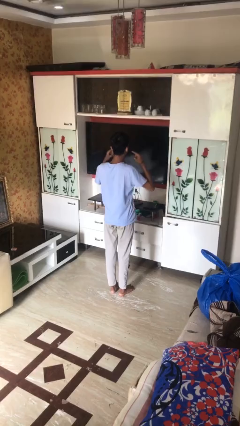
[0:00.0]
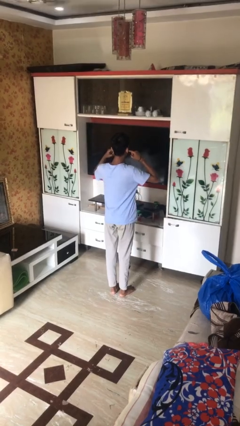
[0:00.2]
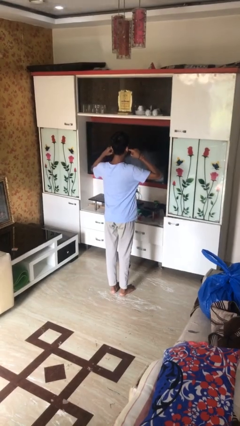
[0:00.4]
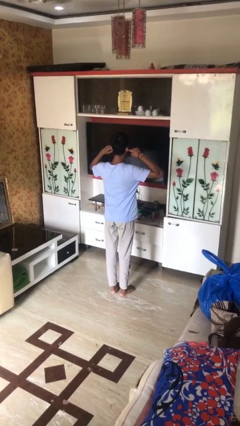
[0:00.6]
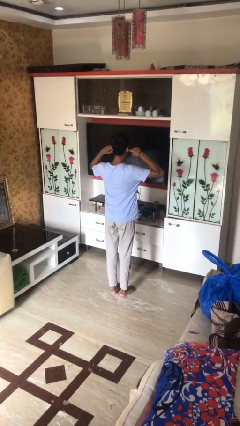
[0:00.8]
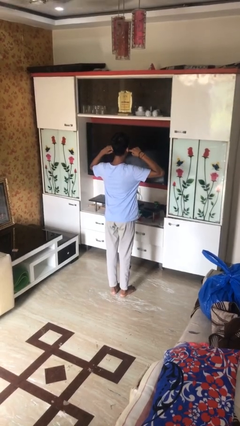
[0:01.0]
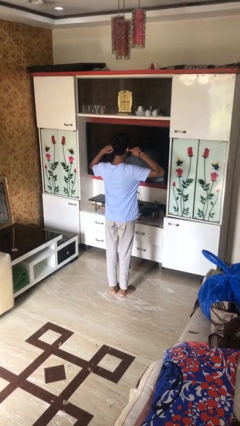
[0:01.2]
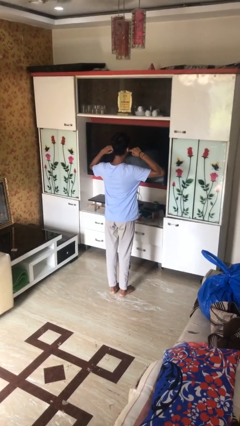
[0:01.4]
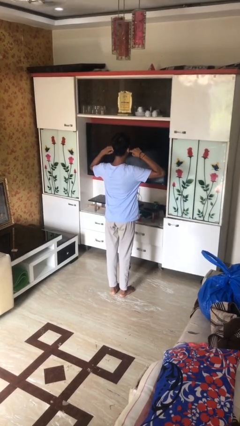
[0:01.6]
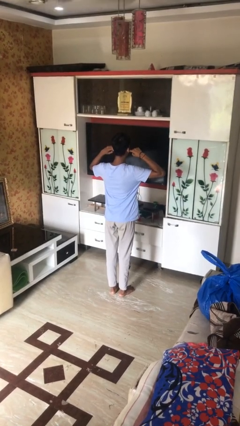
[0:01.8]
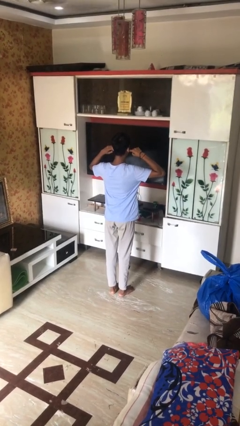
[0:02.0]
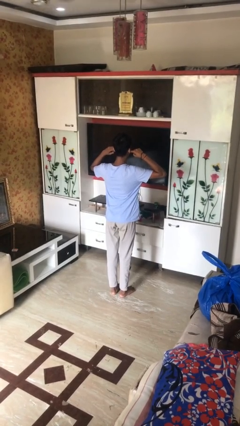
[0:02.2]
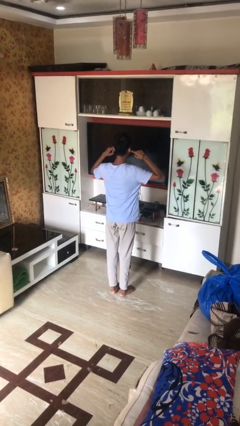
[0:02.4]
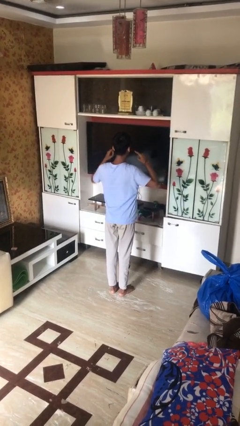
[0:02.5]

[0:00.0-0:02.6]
person puts fingers in ear

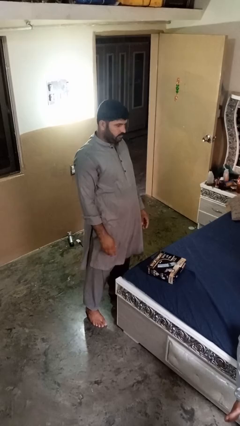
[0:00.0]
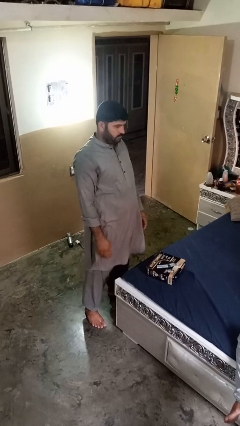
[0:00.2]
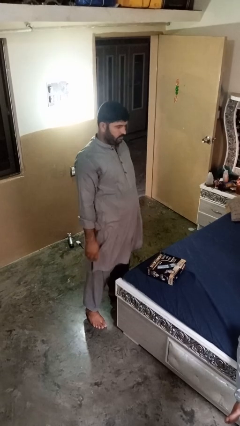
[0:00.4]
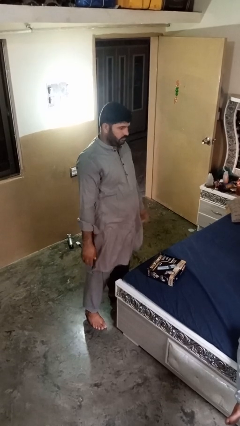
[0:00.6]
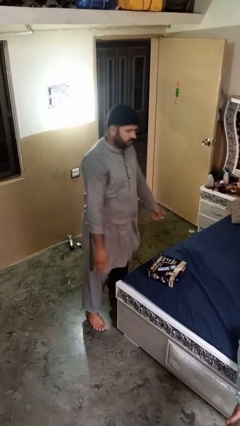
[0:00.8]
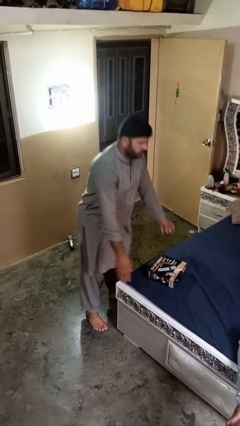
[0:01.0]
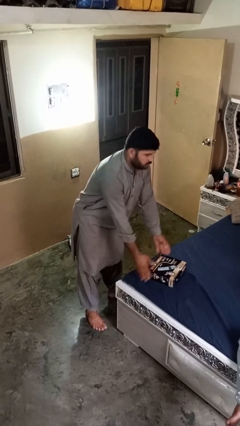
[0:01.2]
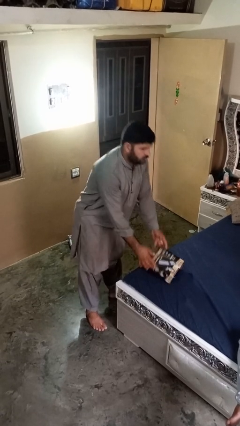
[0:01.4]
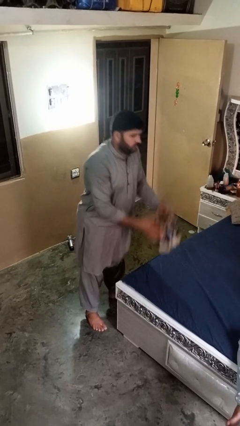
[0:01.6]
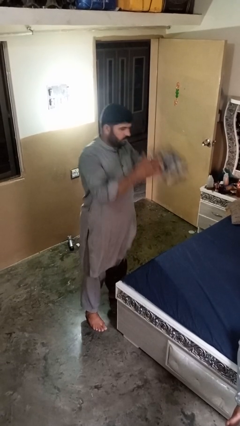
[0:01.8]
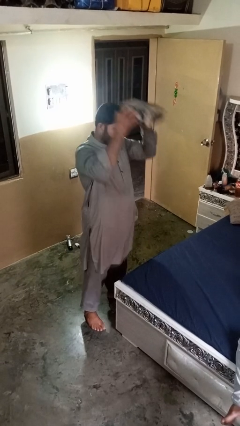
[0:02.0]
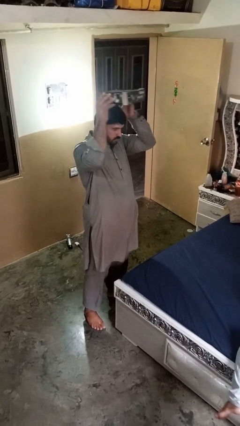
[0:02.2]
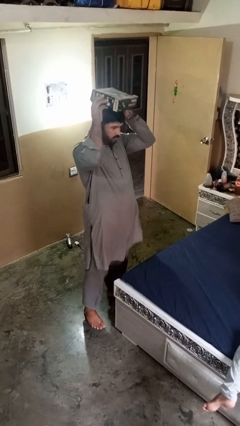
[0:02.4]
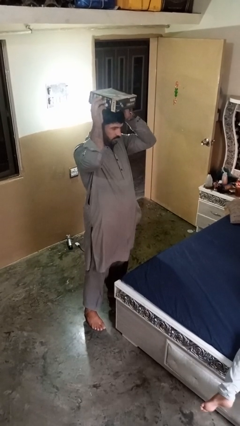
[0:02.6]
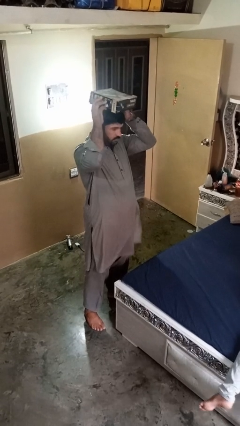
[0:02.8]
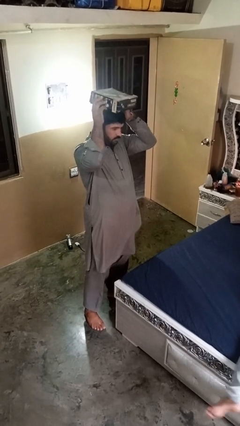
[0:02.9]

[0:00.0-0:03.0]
person holds object above head

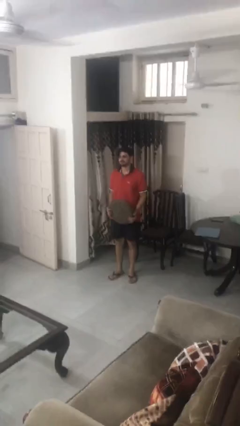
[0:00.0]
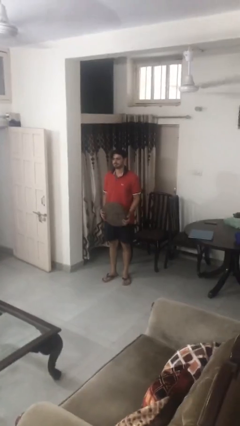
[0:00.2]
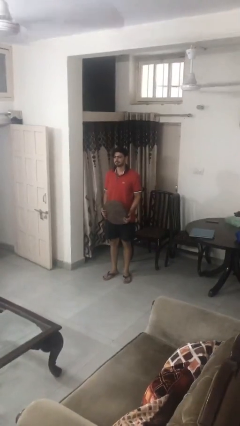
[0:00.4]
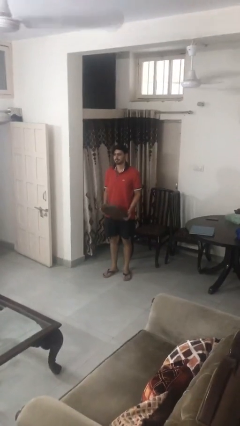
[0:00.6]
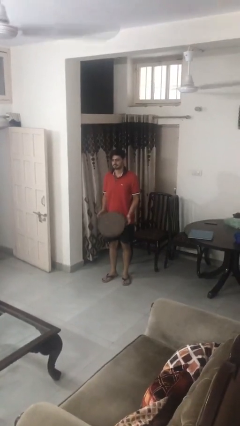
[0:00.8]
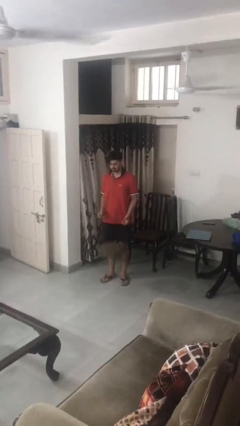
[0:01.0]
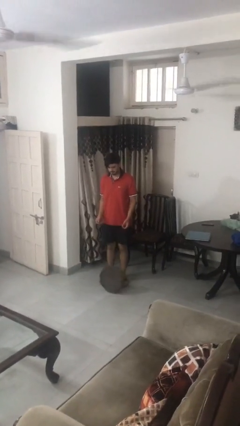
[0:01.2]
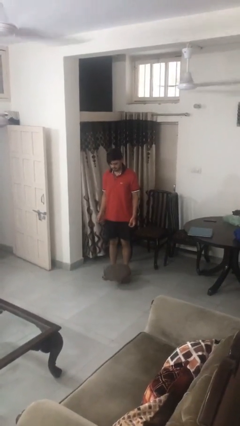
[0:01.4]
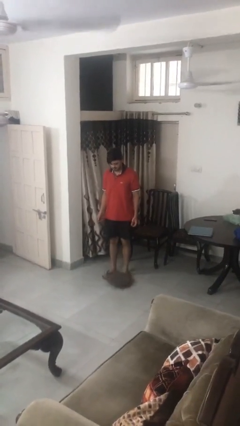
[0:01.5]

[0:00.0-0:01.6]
person drops object

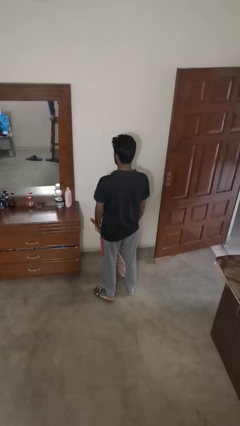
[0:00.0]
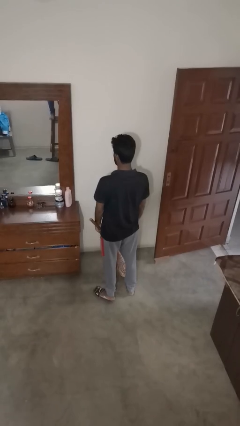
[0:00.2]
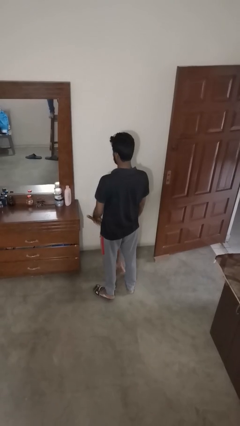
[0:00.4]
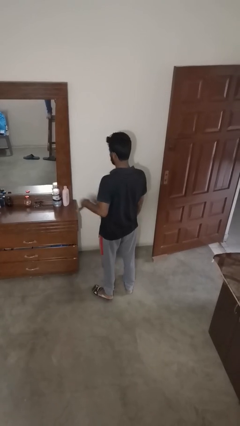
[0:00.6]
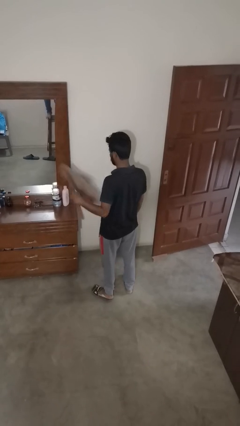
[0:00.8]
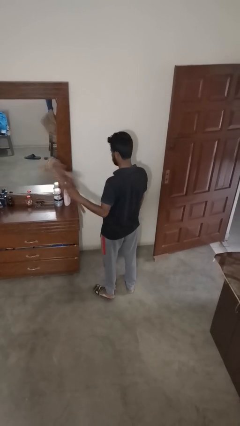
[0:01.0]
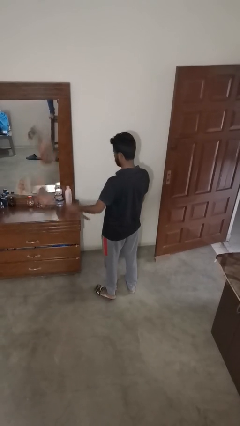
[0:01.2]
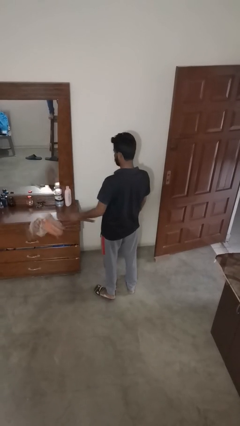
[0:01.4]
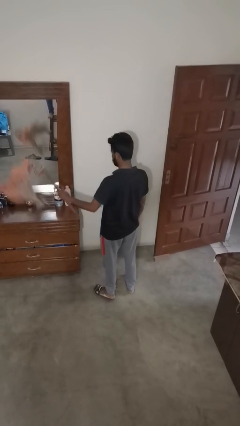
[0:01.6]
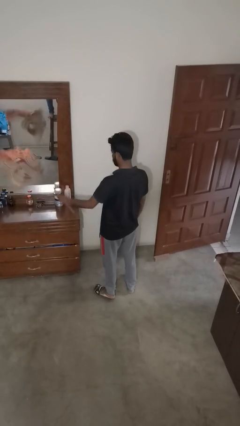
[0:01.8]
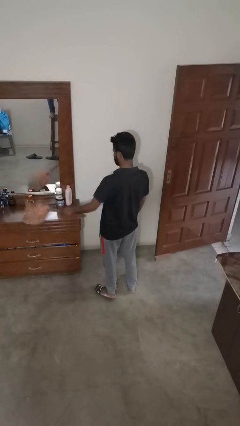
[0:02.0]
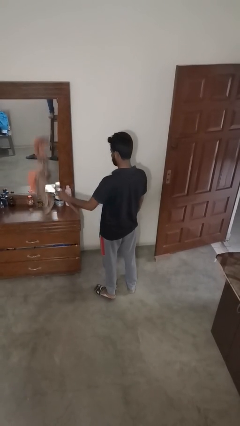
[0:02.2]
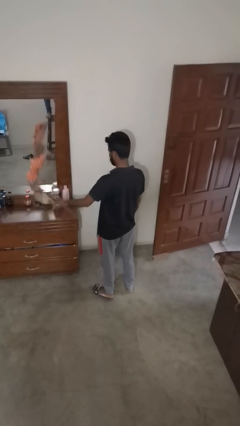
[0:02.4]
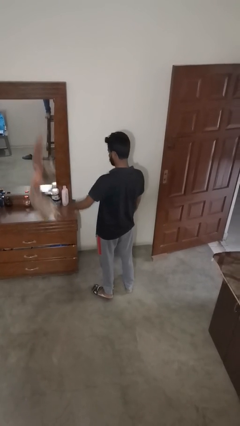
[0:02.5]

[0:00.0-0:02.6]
person dusts furniture

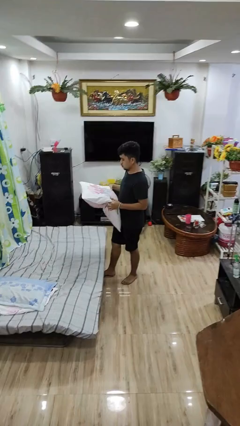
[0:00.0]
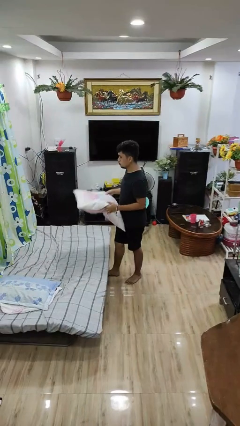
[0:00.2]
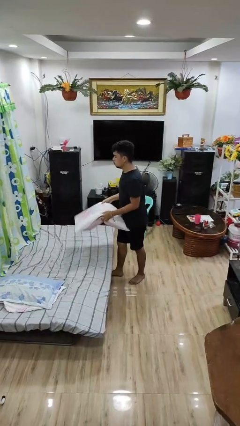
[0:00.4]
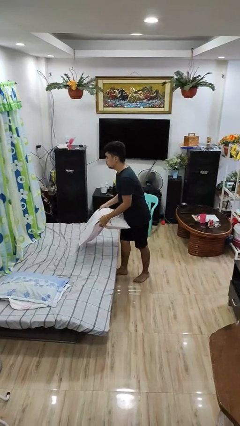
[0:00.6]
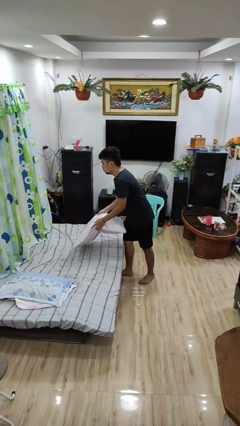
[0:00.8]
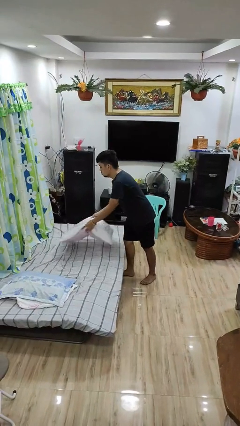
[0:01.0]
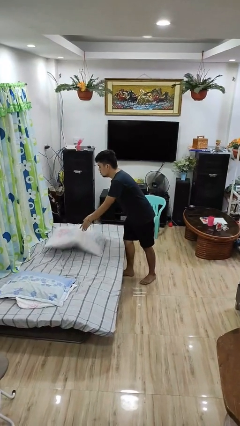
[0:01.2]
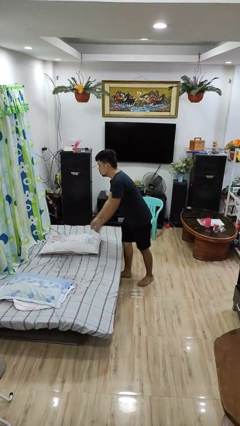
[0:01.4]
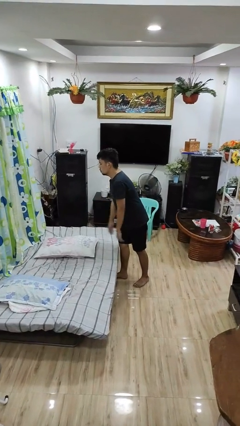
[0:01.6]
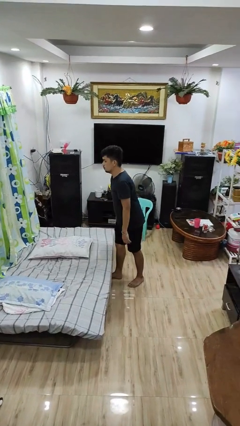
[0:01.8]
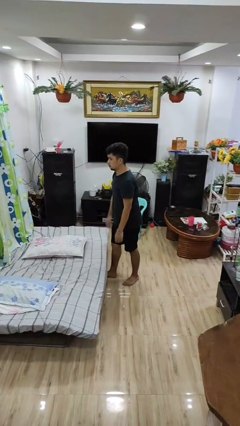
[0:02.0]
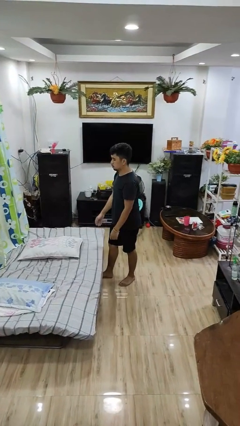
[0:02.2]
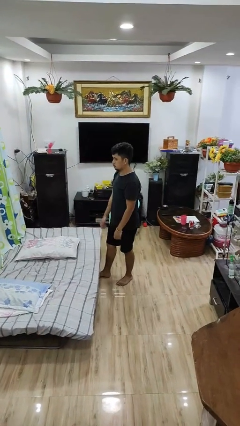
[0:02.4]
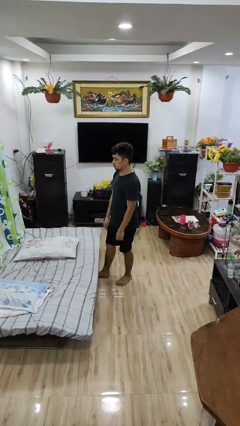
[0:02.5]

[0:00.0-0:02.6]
person puts down object on bed

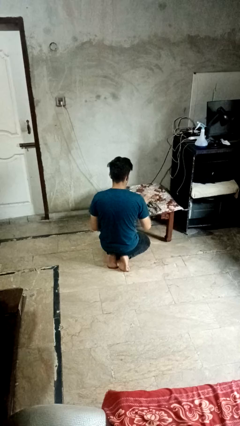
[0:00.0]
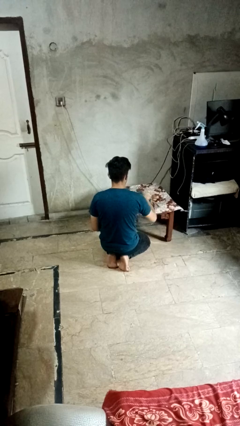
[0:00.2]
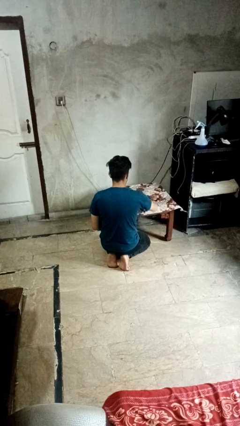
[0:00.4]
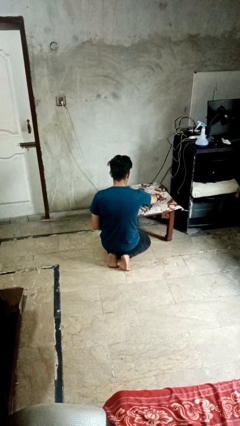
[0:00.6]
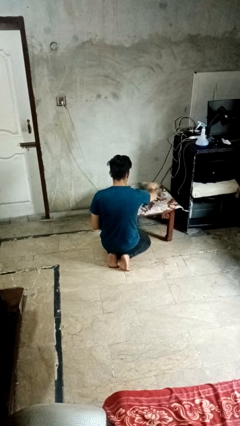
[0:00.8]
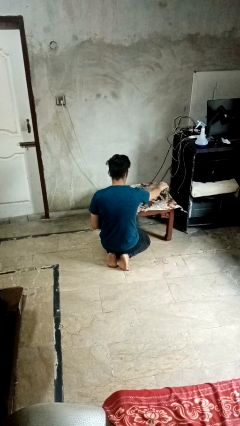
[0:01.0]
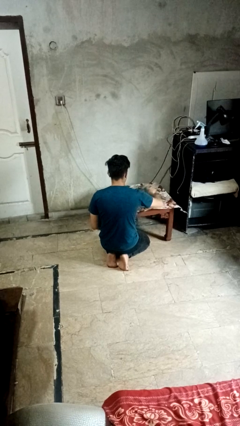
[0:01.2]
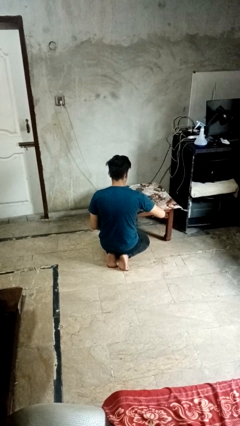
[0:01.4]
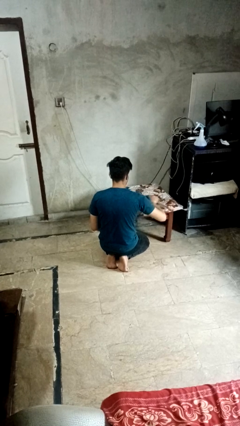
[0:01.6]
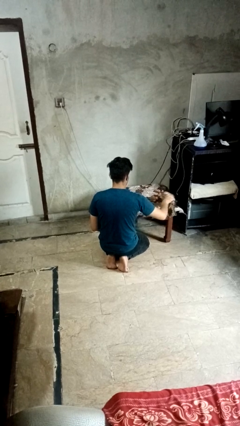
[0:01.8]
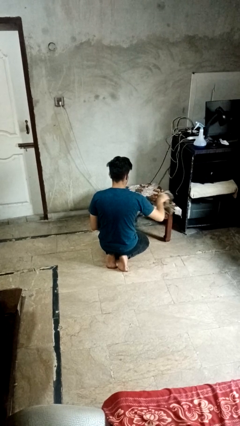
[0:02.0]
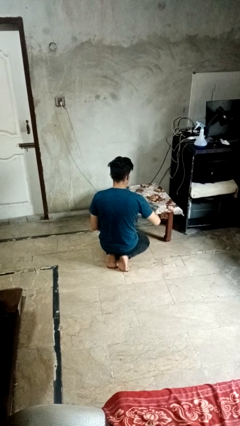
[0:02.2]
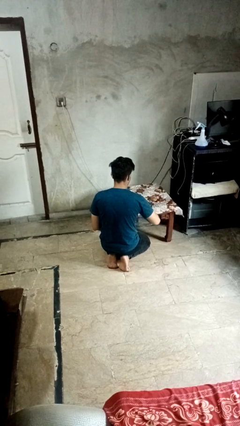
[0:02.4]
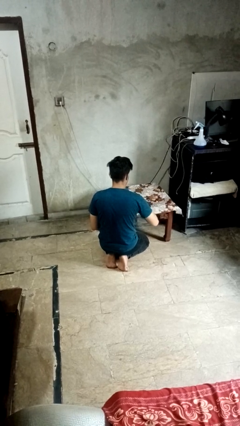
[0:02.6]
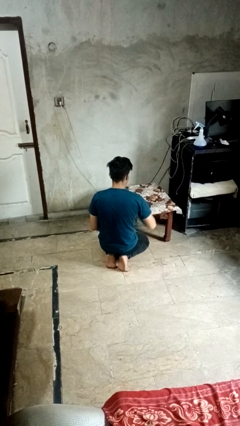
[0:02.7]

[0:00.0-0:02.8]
person cleans table with rag

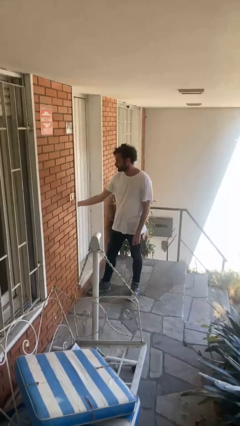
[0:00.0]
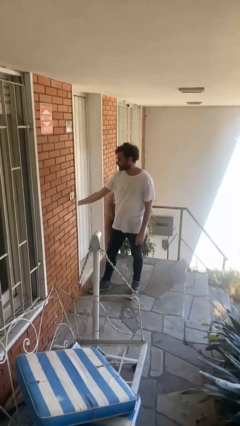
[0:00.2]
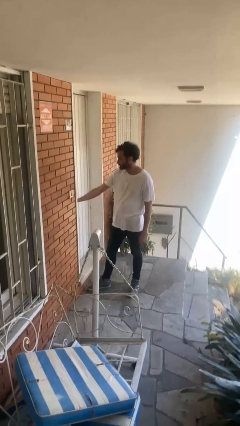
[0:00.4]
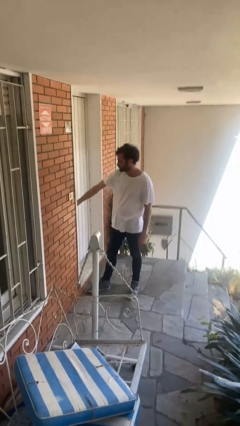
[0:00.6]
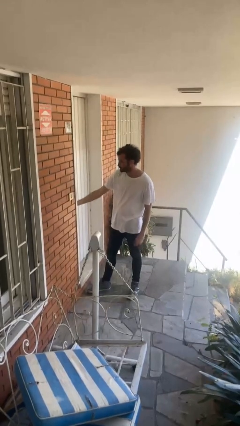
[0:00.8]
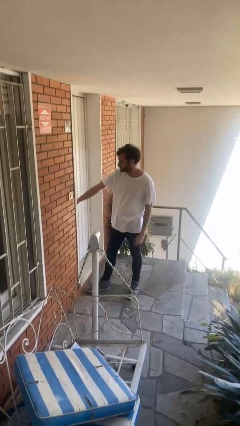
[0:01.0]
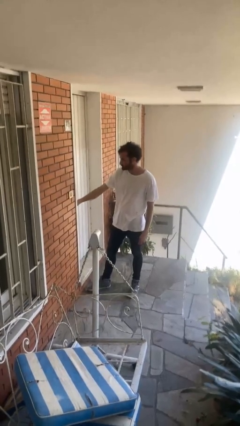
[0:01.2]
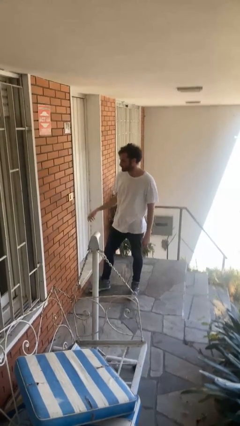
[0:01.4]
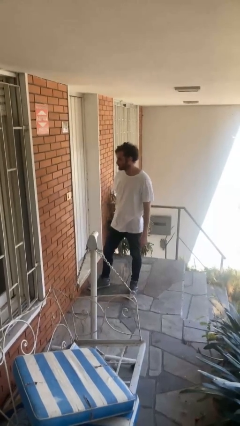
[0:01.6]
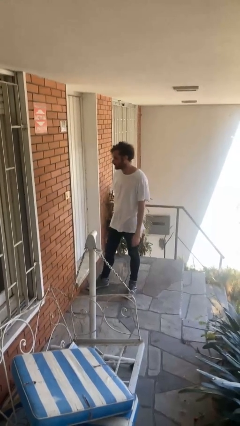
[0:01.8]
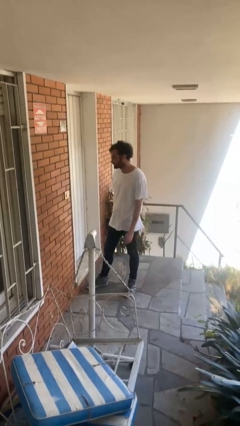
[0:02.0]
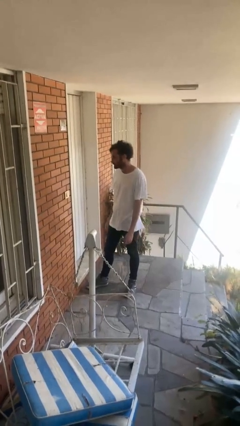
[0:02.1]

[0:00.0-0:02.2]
person locks door with keys
